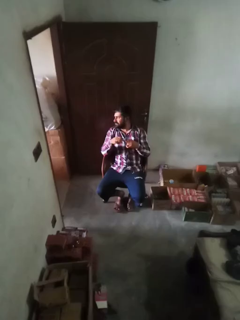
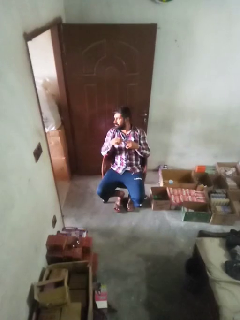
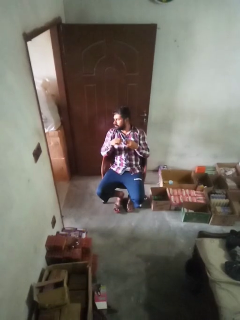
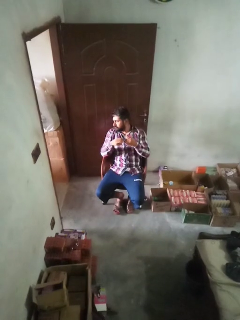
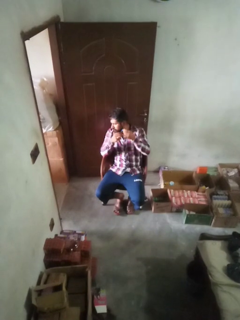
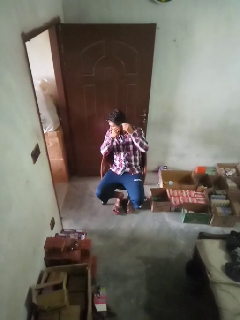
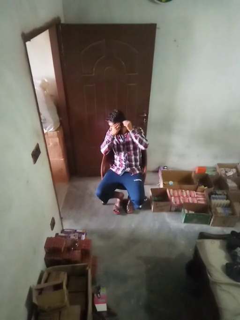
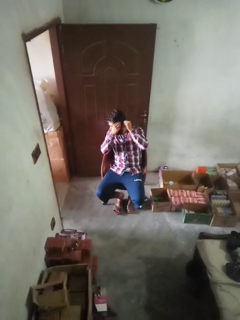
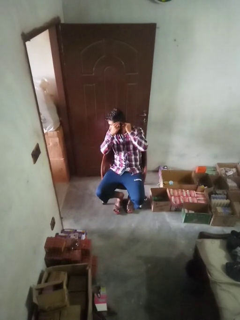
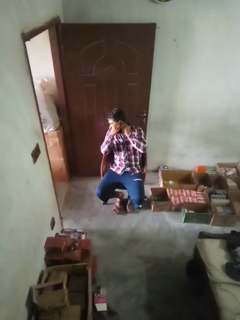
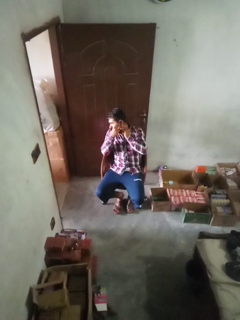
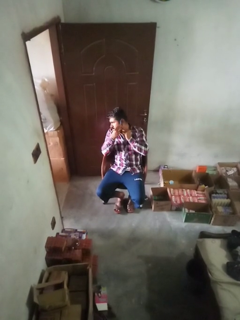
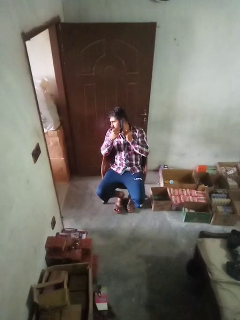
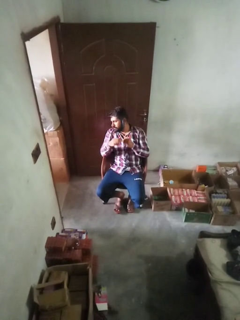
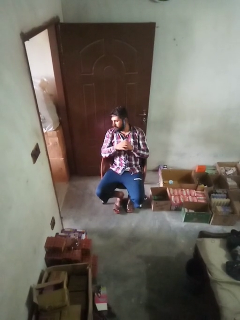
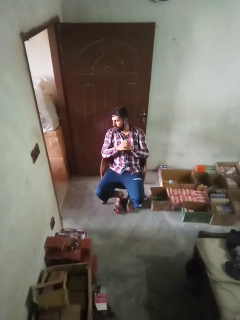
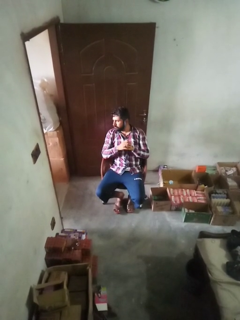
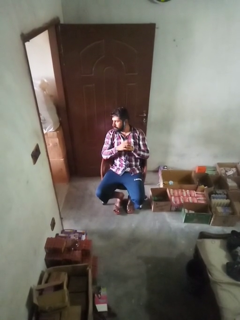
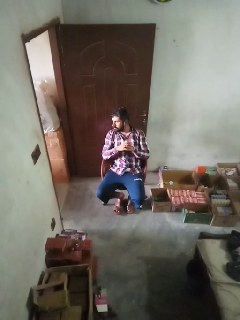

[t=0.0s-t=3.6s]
person puts on earrings

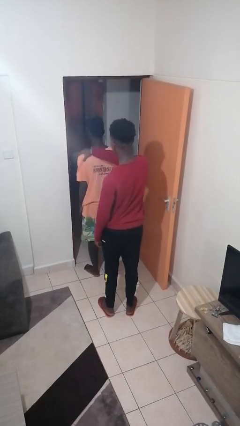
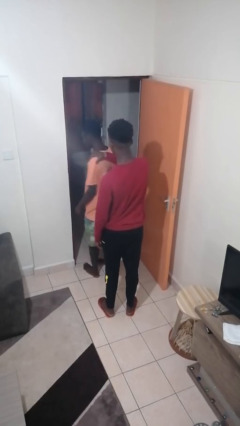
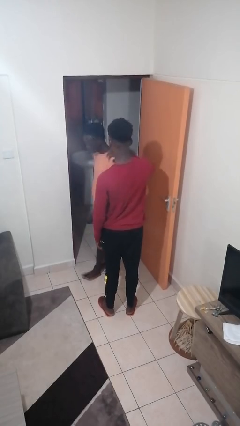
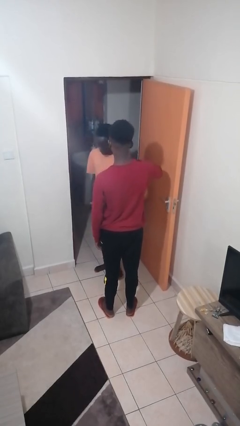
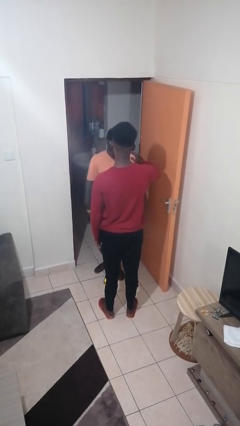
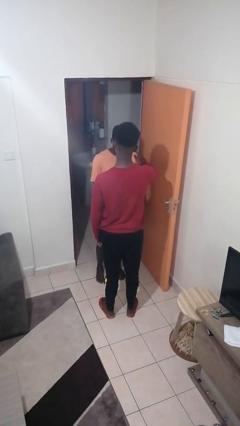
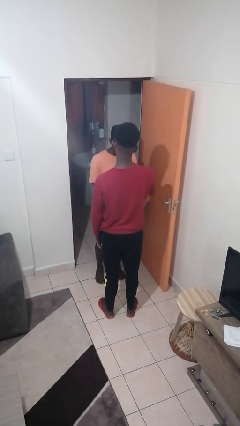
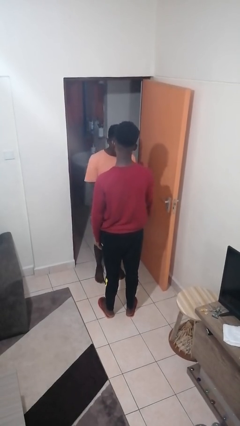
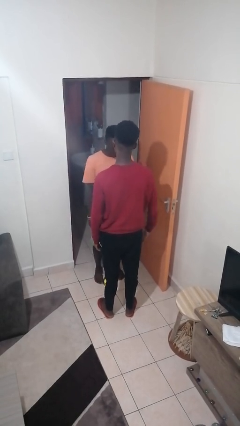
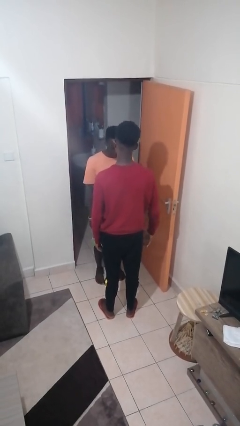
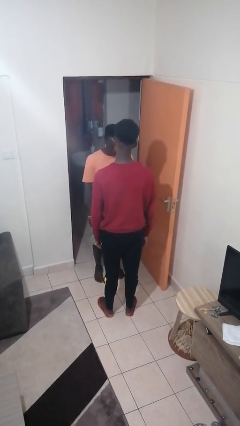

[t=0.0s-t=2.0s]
person spins person around

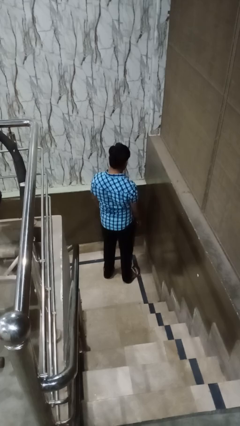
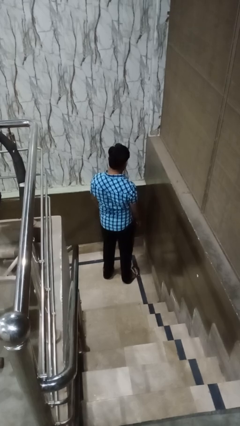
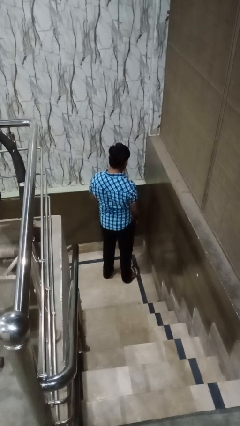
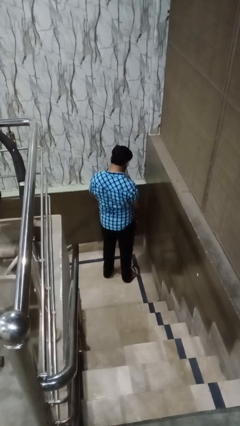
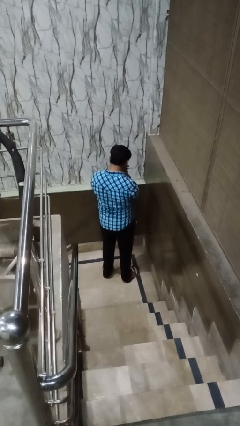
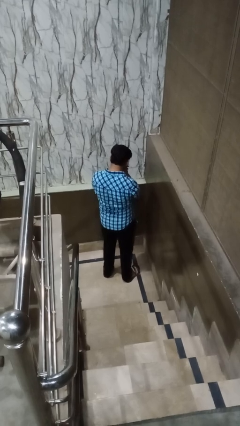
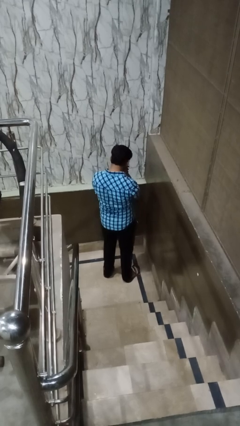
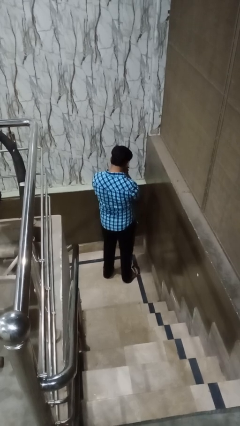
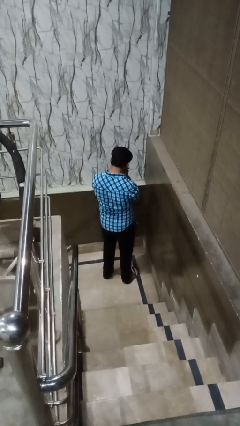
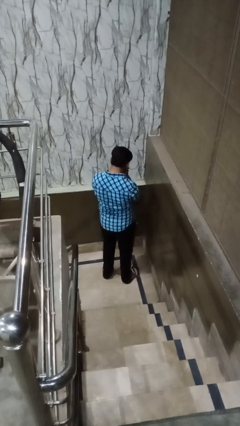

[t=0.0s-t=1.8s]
person sneezes into hand

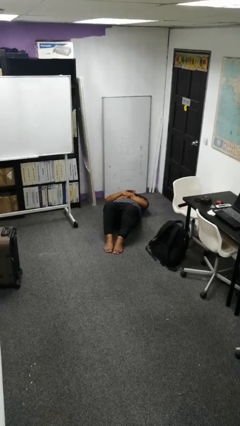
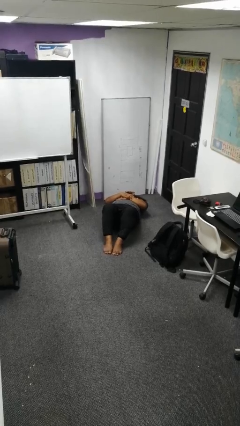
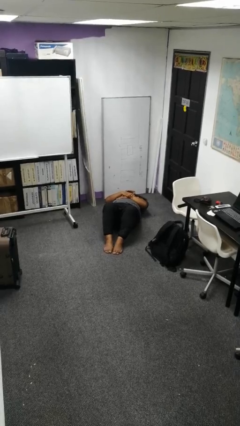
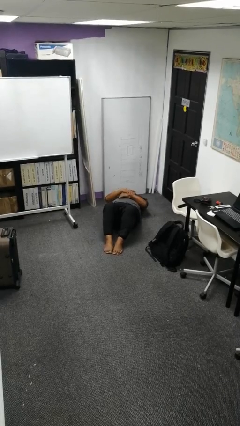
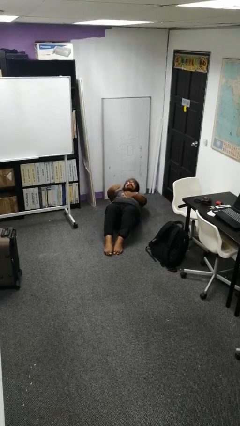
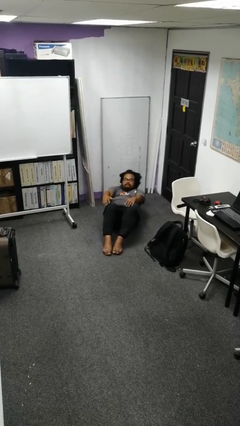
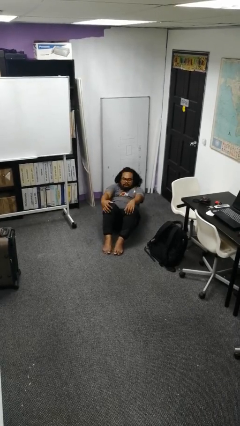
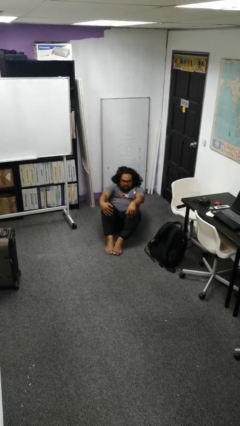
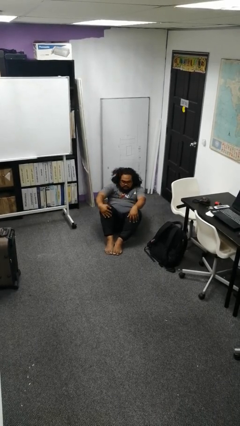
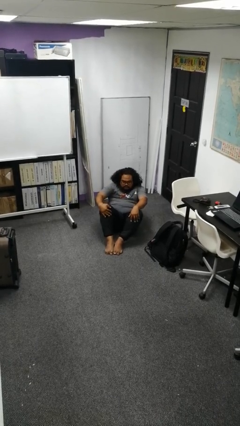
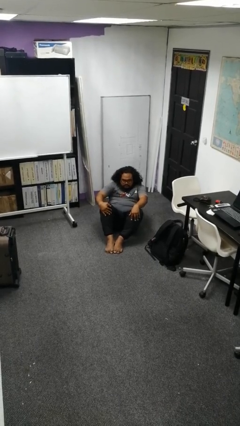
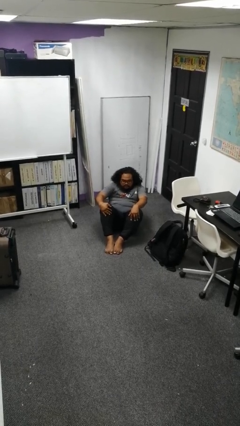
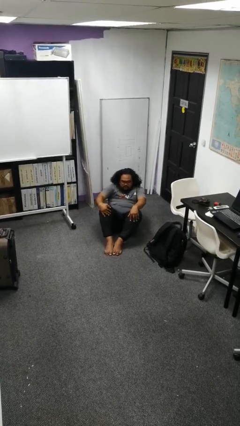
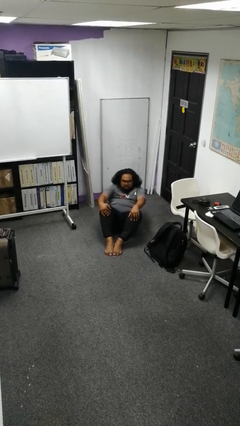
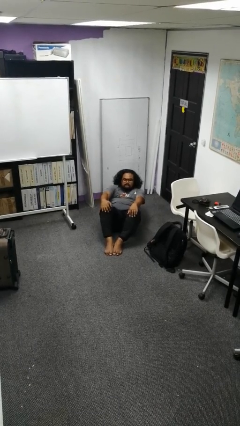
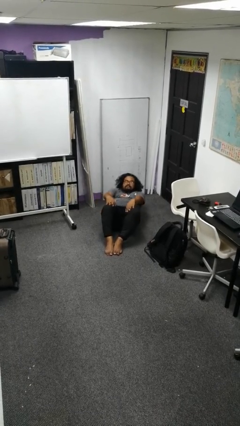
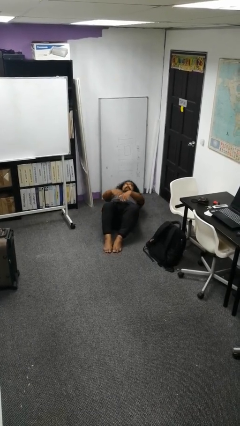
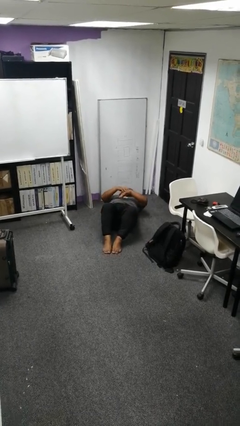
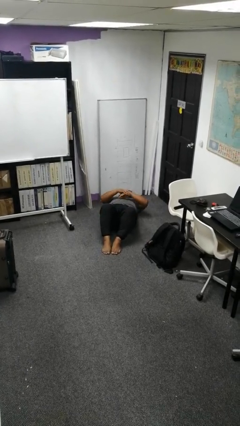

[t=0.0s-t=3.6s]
person exercises with situp

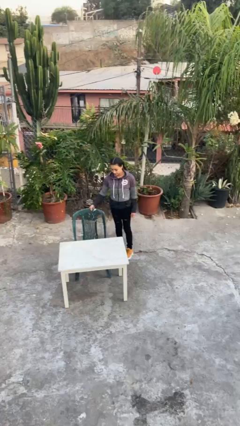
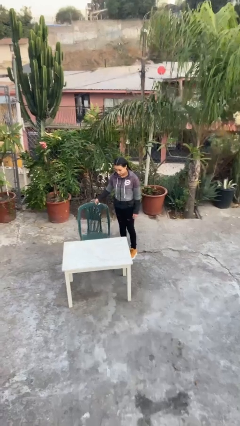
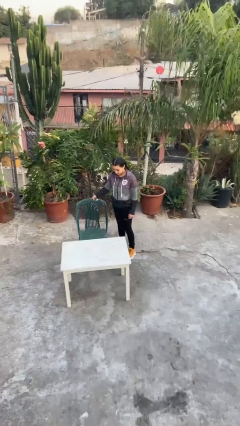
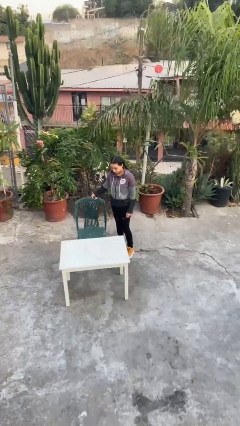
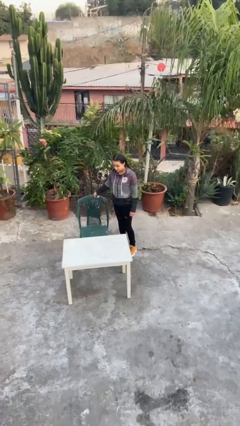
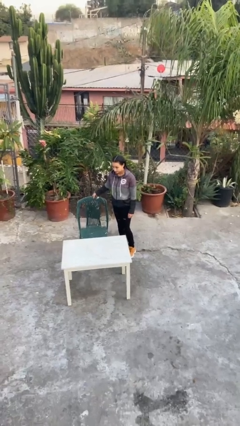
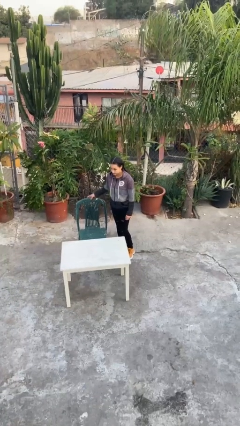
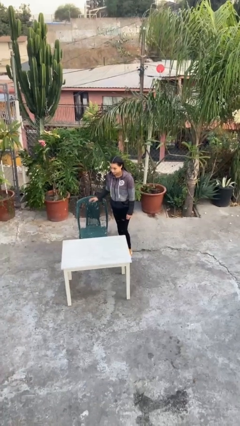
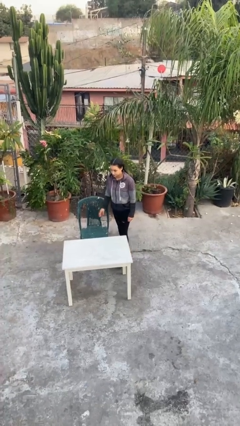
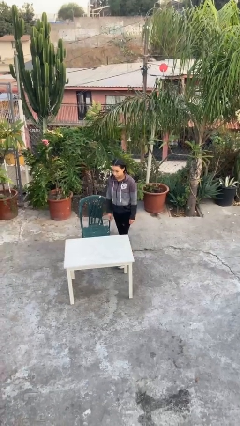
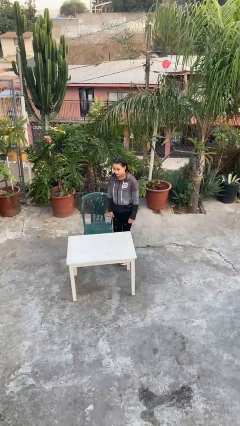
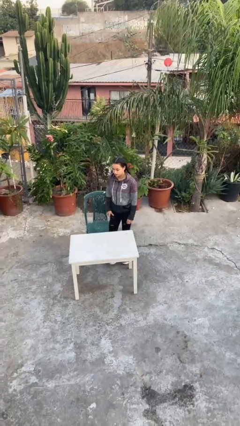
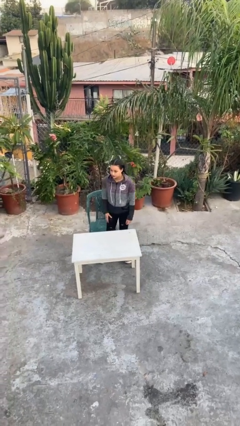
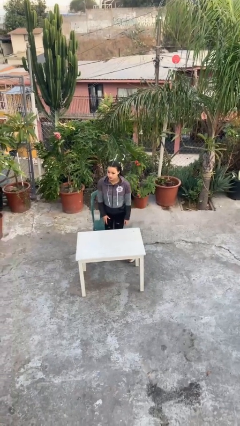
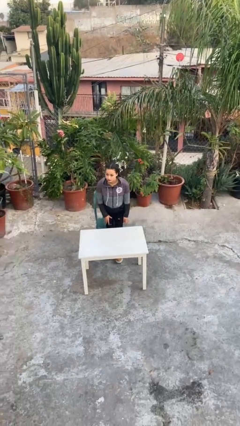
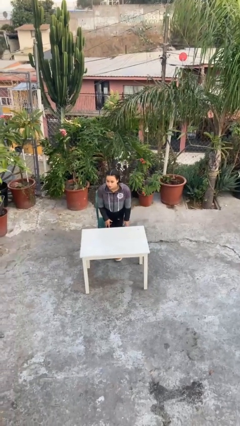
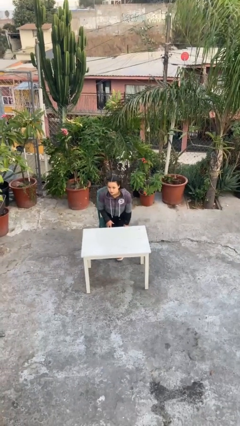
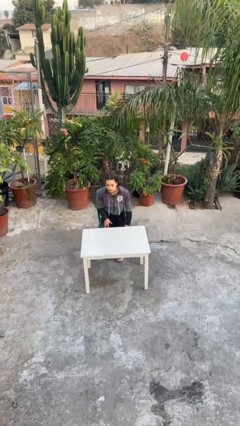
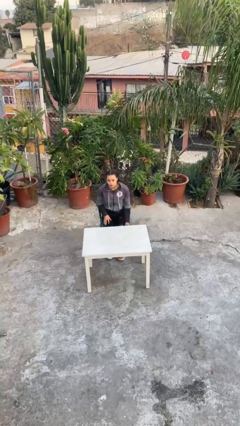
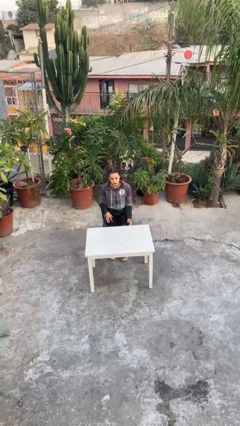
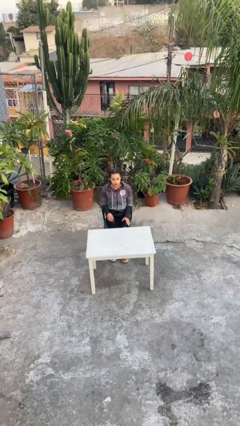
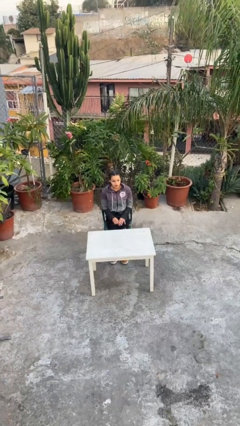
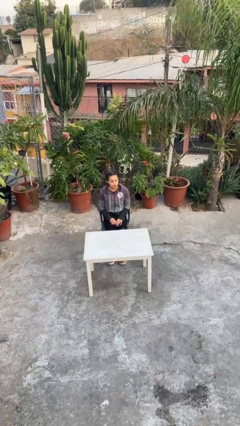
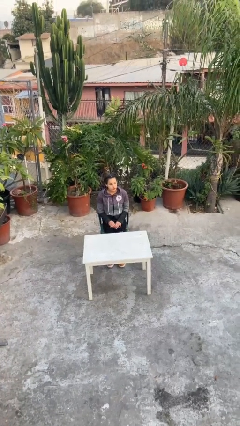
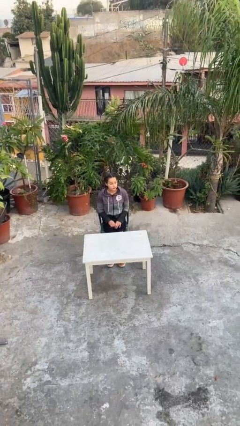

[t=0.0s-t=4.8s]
person sits down

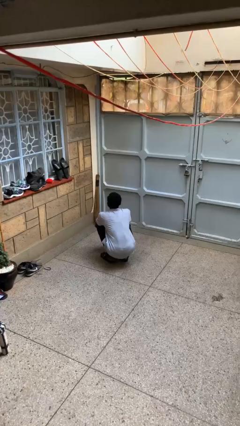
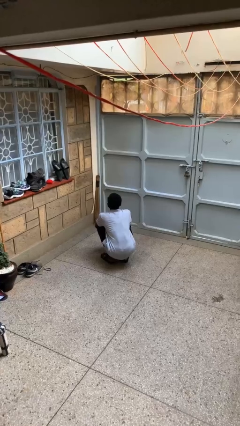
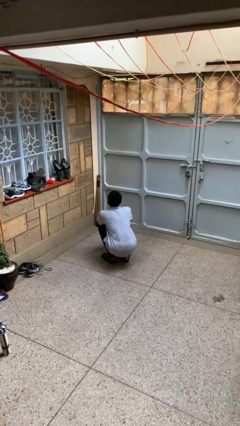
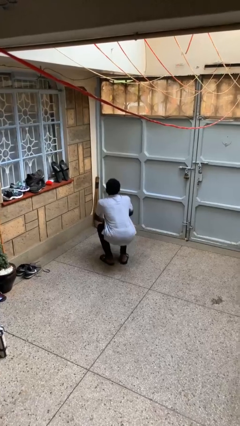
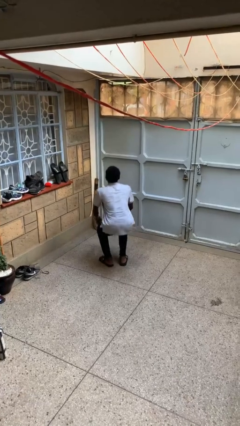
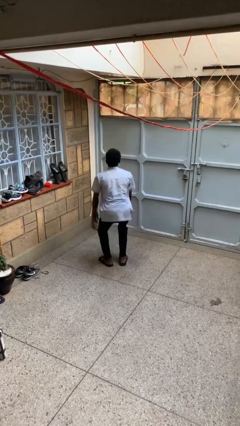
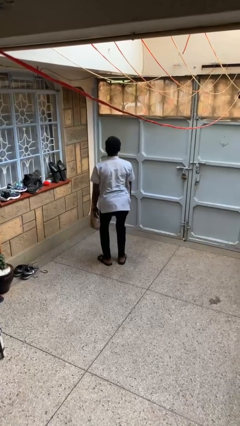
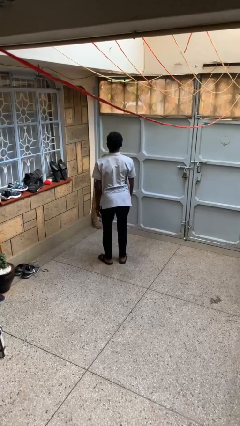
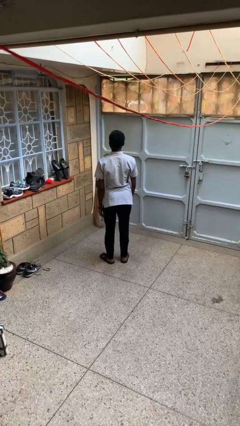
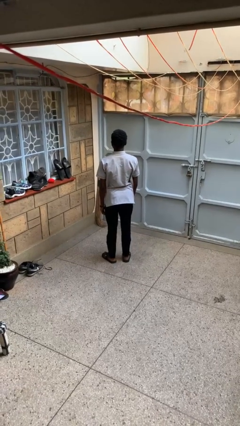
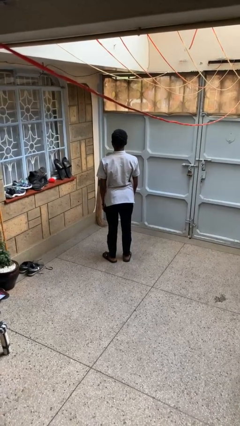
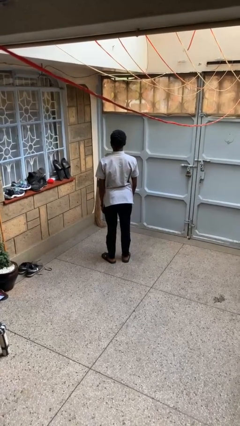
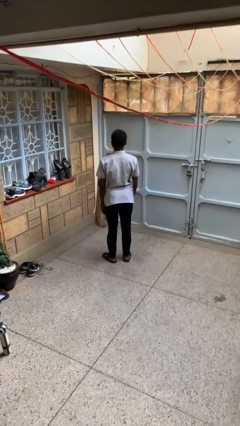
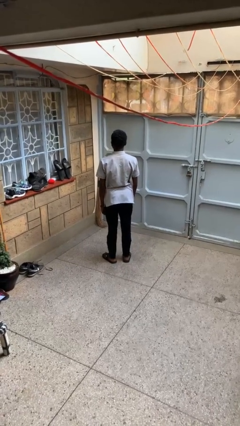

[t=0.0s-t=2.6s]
person stands up
